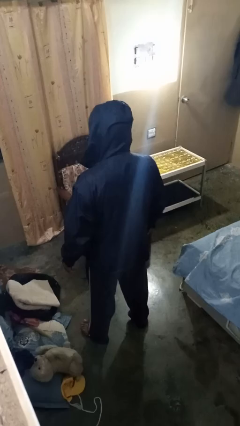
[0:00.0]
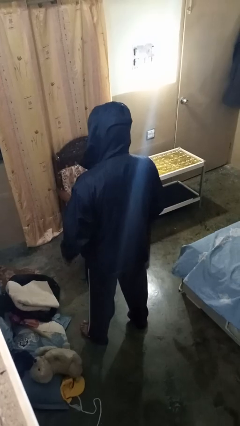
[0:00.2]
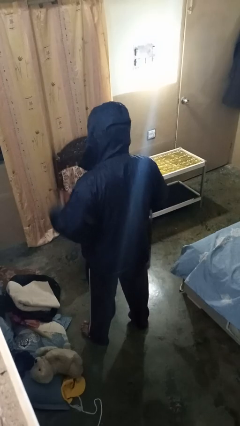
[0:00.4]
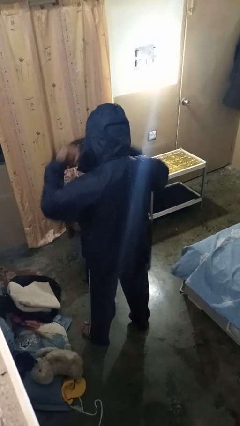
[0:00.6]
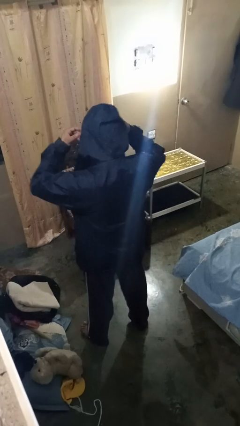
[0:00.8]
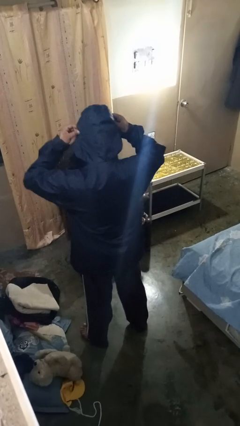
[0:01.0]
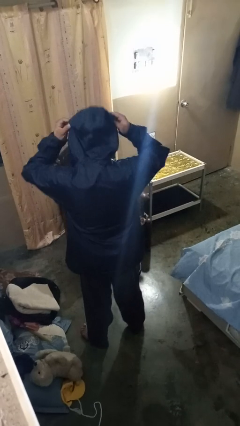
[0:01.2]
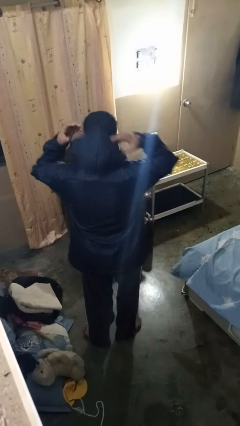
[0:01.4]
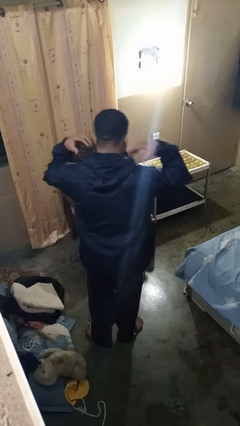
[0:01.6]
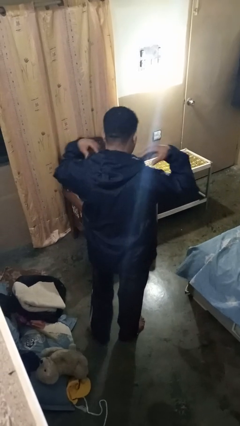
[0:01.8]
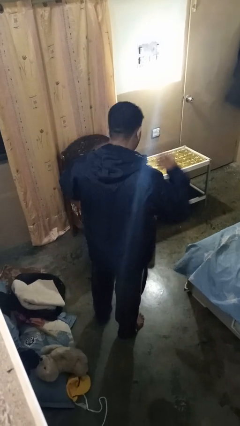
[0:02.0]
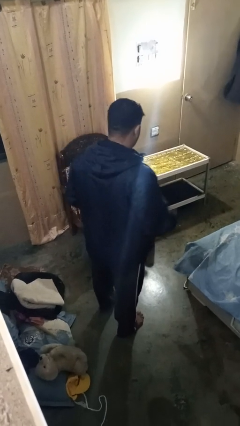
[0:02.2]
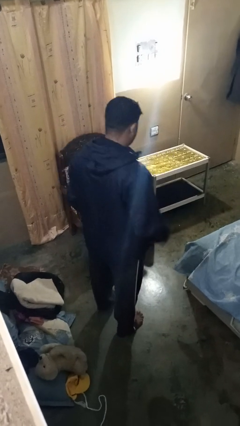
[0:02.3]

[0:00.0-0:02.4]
person takes off hoodie

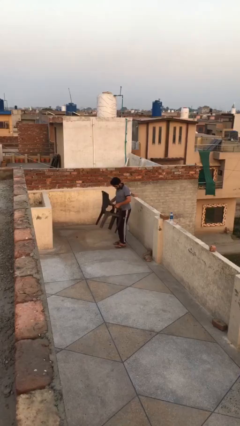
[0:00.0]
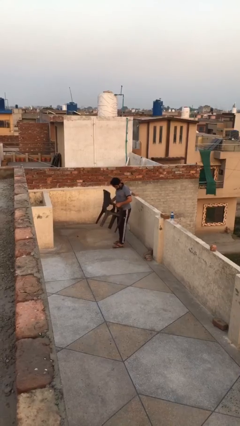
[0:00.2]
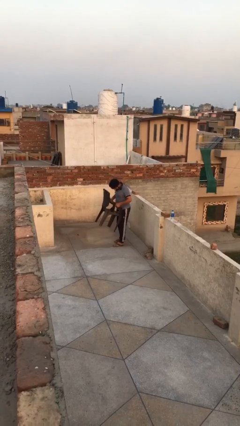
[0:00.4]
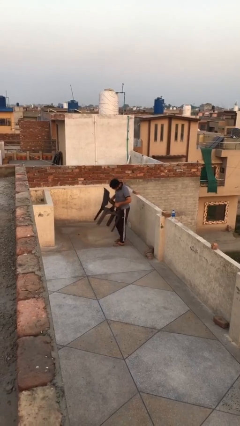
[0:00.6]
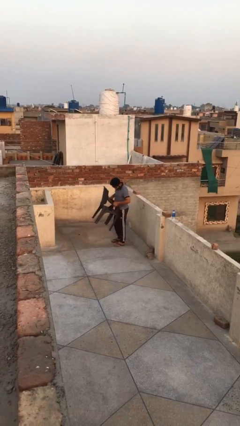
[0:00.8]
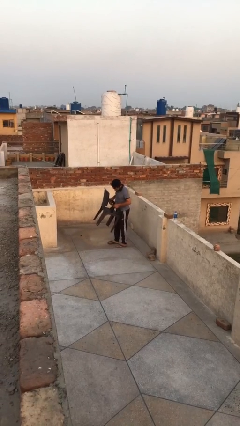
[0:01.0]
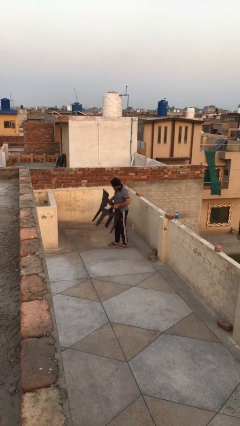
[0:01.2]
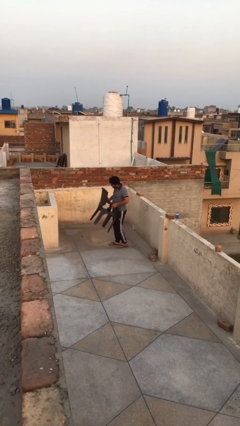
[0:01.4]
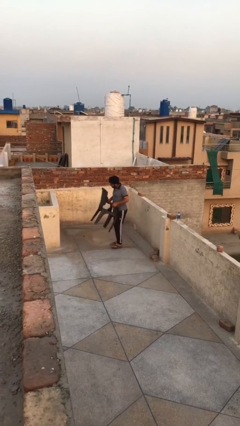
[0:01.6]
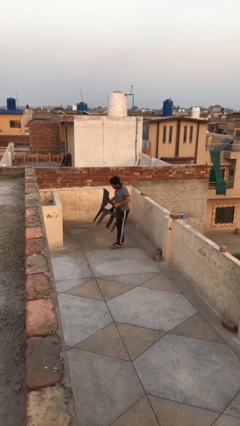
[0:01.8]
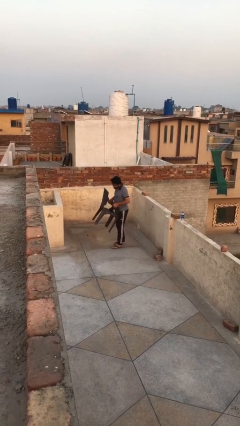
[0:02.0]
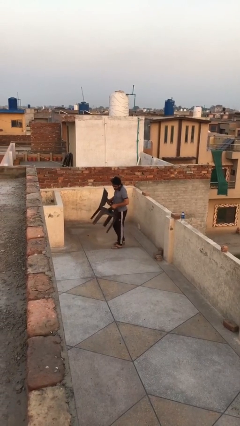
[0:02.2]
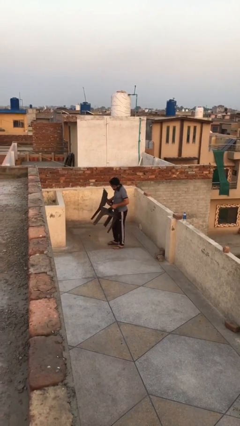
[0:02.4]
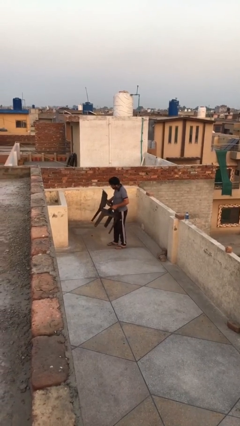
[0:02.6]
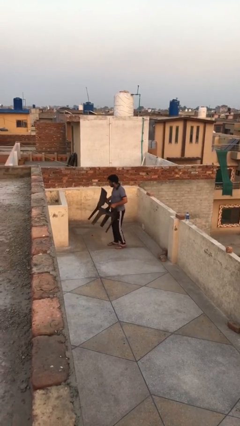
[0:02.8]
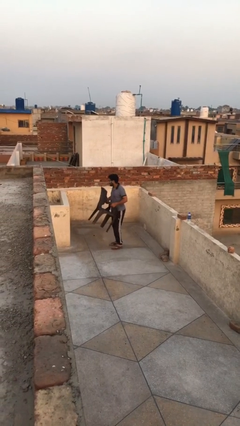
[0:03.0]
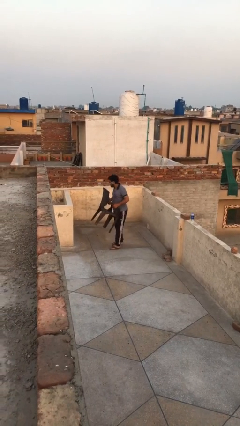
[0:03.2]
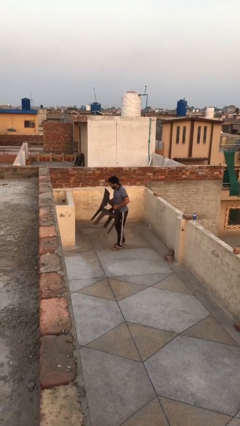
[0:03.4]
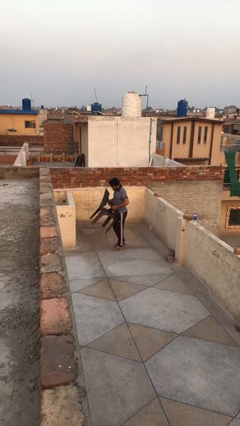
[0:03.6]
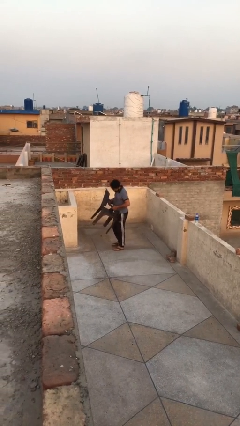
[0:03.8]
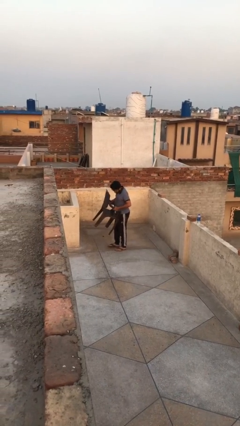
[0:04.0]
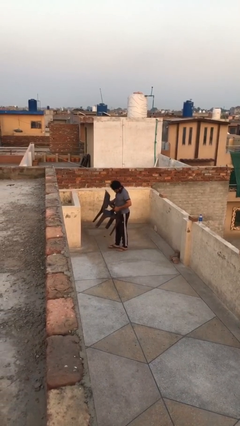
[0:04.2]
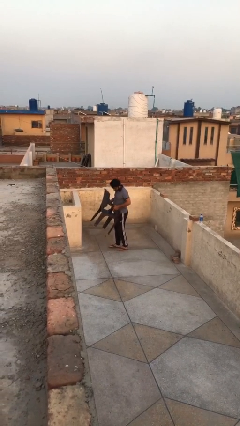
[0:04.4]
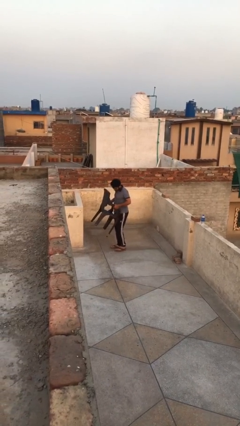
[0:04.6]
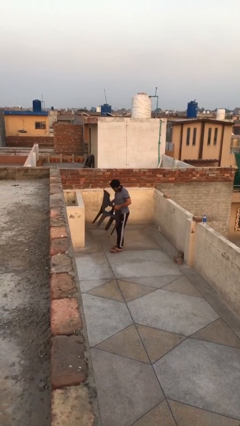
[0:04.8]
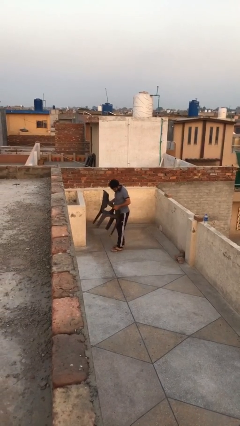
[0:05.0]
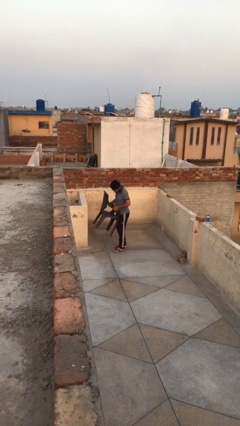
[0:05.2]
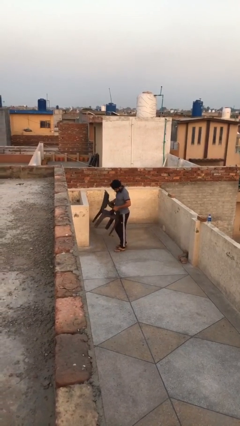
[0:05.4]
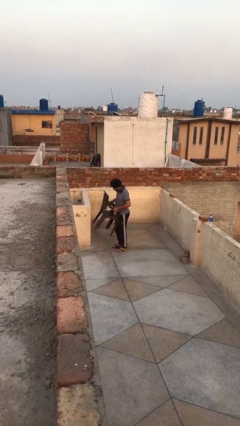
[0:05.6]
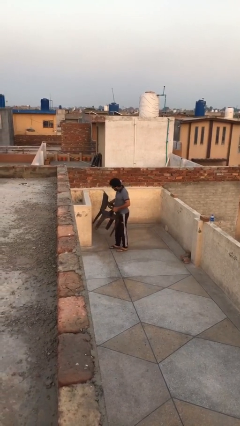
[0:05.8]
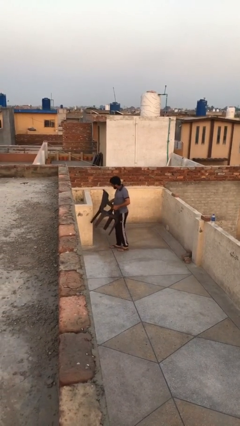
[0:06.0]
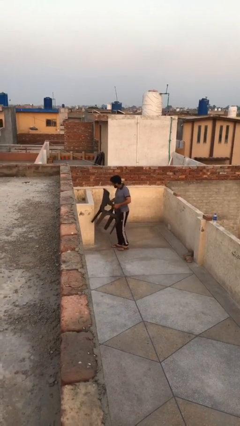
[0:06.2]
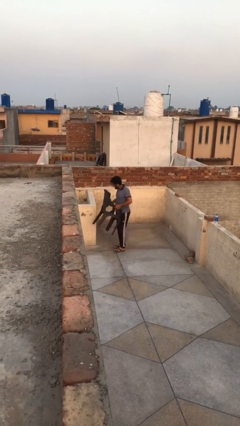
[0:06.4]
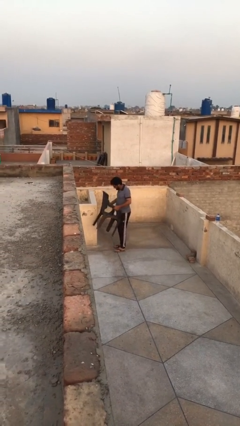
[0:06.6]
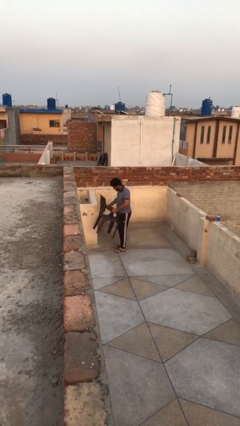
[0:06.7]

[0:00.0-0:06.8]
person carries heavy object

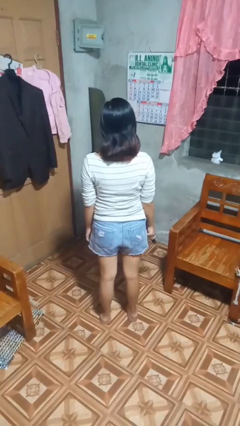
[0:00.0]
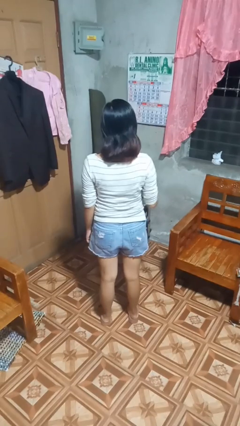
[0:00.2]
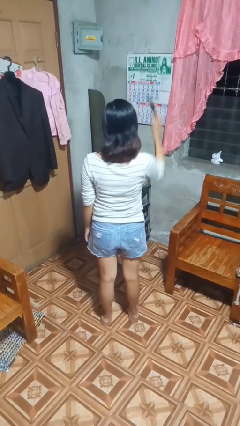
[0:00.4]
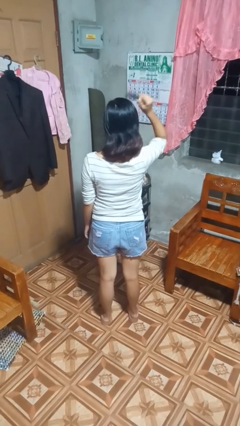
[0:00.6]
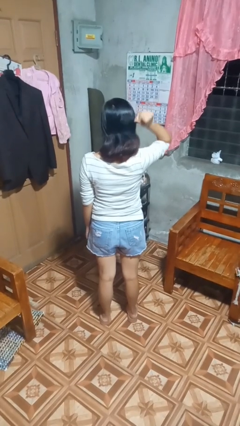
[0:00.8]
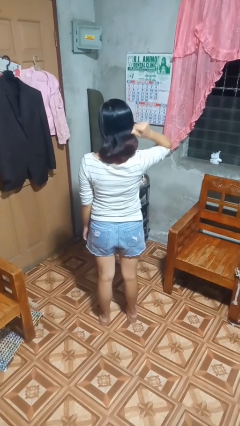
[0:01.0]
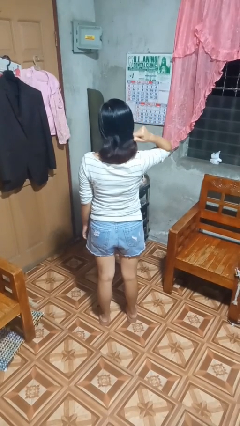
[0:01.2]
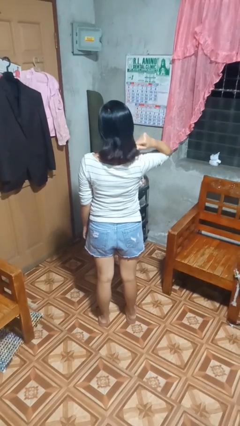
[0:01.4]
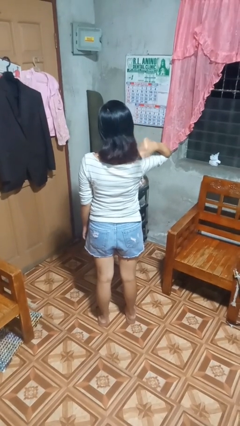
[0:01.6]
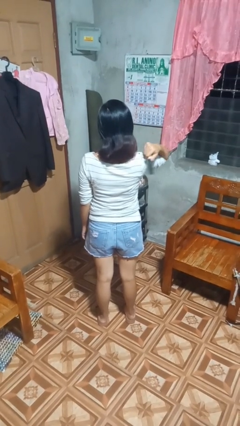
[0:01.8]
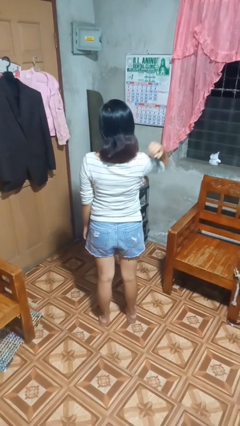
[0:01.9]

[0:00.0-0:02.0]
person brushes hair

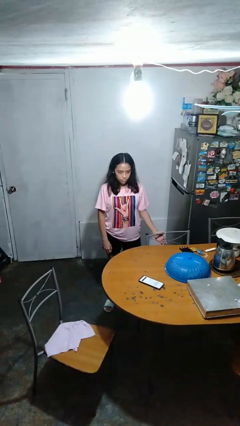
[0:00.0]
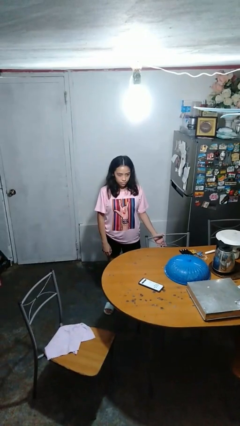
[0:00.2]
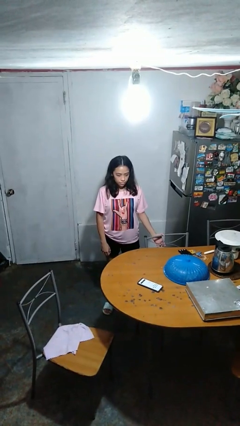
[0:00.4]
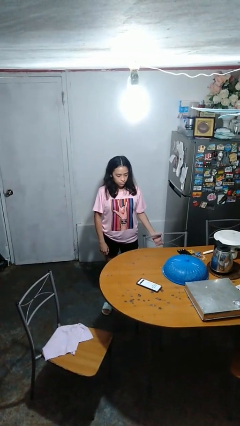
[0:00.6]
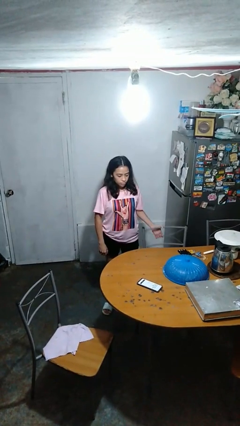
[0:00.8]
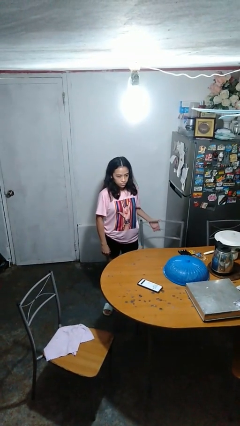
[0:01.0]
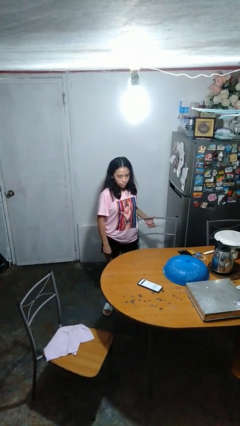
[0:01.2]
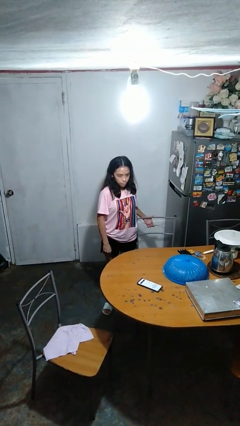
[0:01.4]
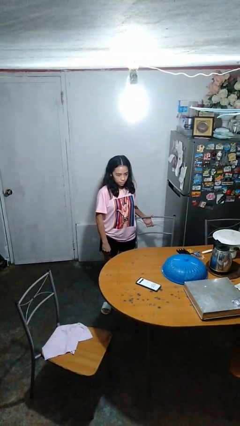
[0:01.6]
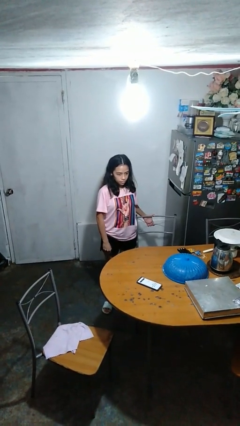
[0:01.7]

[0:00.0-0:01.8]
person pulls out chair

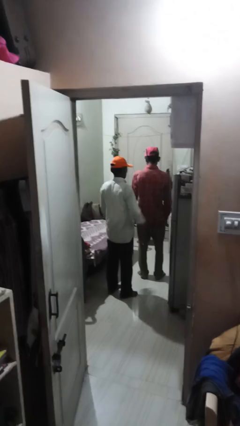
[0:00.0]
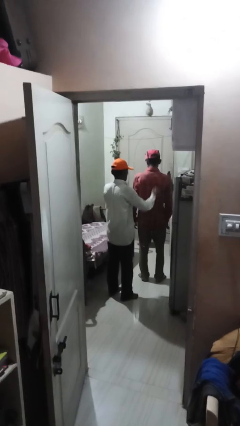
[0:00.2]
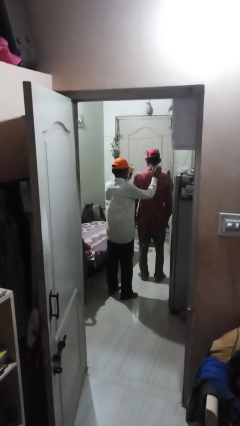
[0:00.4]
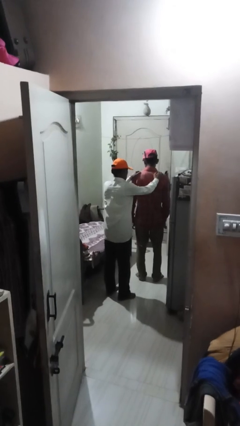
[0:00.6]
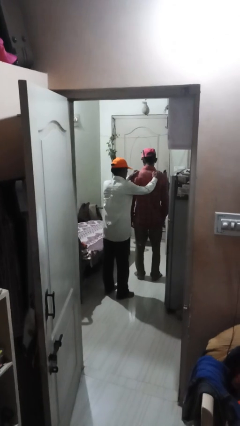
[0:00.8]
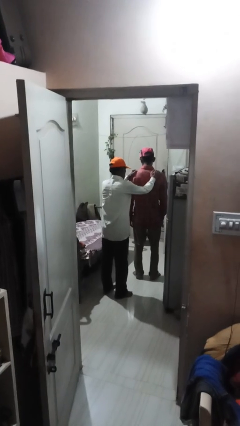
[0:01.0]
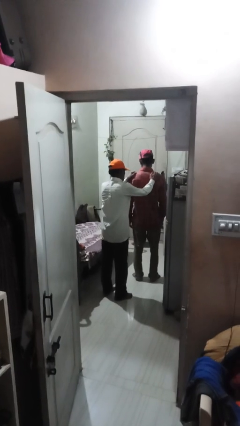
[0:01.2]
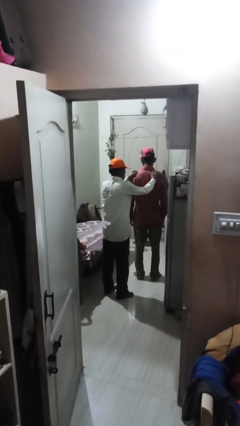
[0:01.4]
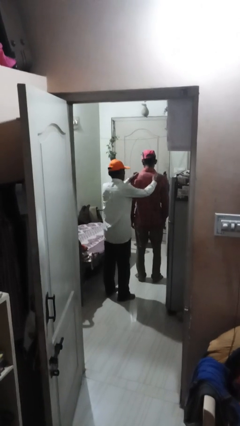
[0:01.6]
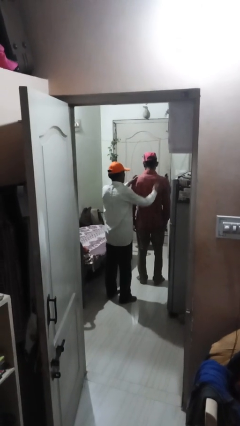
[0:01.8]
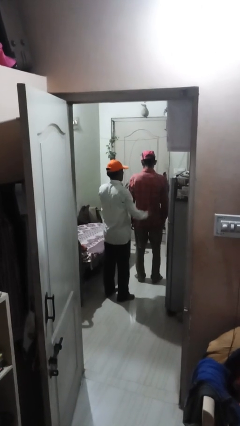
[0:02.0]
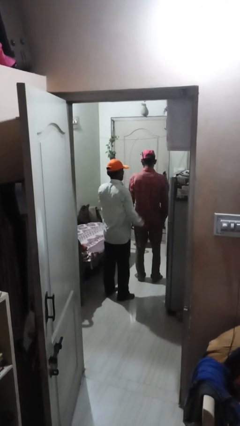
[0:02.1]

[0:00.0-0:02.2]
person touches back of person

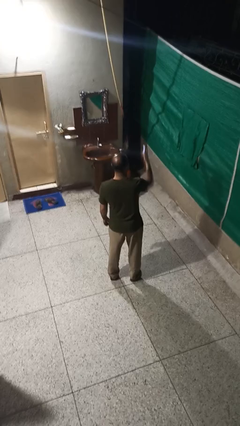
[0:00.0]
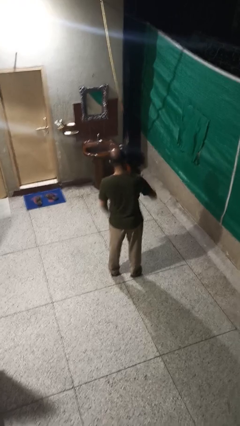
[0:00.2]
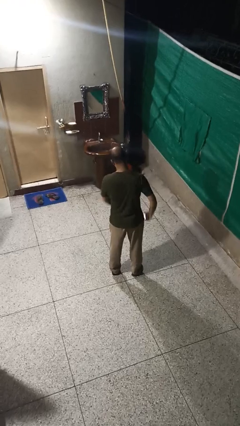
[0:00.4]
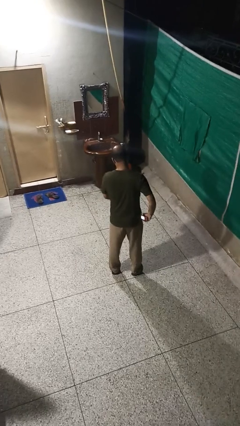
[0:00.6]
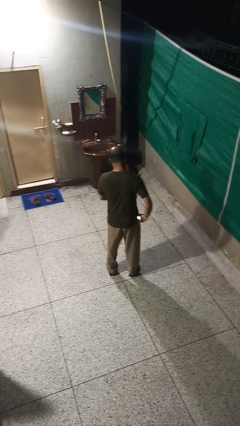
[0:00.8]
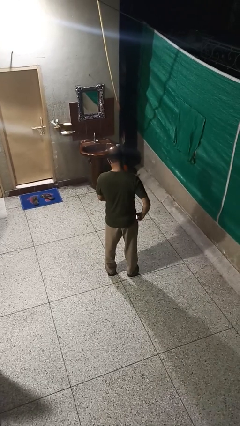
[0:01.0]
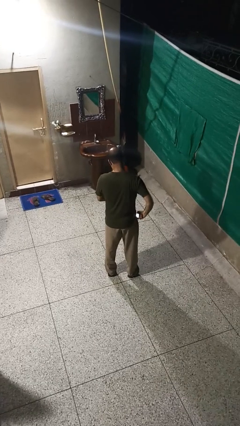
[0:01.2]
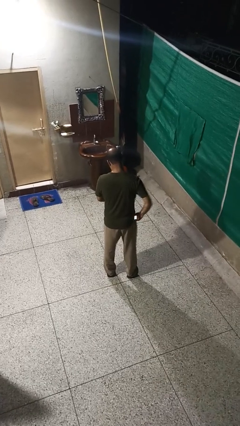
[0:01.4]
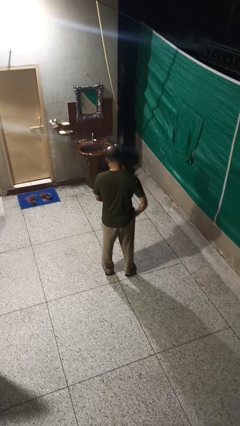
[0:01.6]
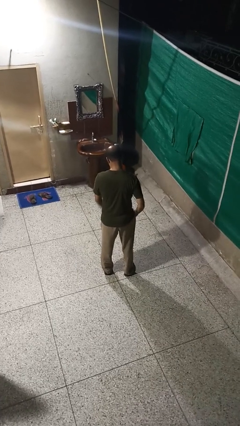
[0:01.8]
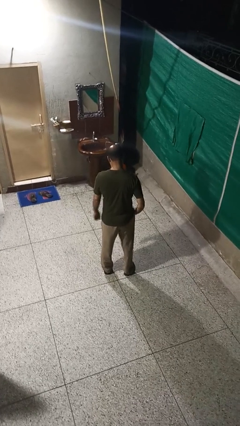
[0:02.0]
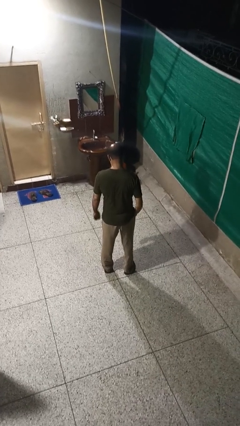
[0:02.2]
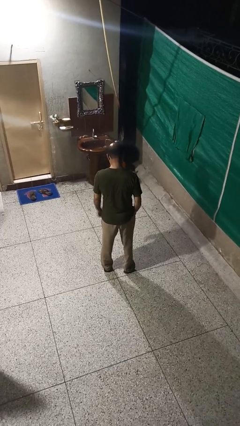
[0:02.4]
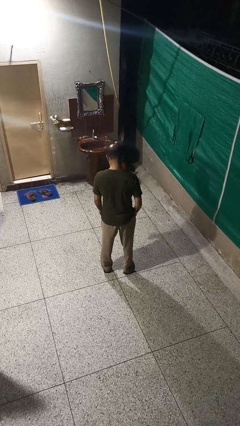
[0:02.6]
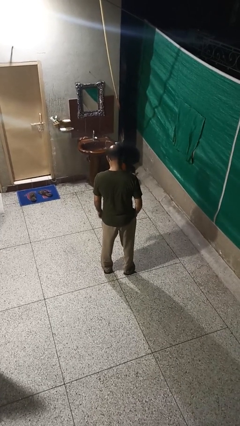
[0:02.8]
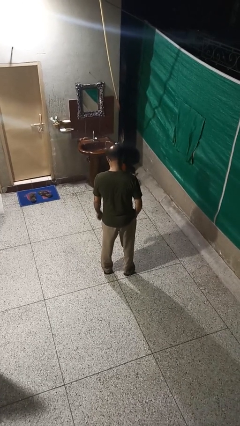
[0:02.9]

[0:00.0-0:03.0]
person puts phone into pocket
